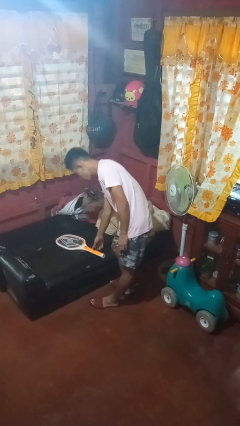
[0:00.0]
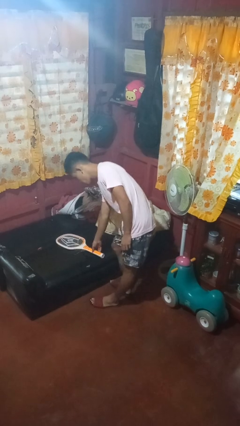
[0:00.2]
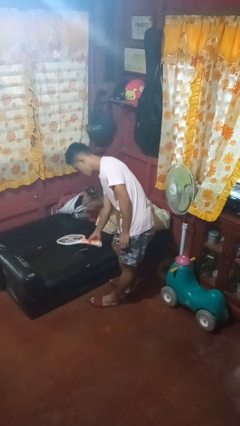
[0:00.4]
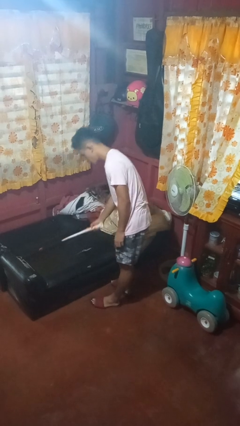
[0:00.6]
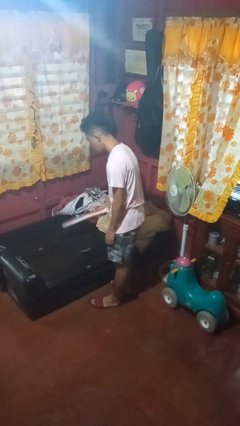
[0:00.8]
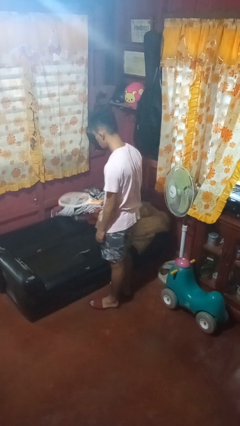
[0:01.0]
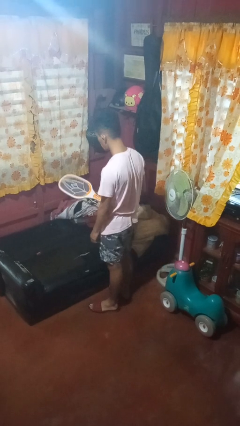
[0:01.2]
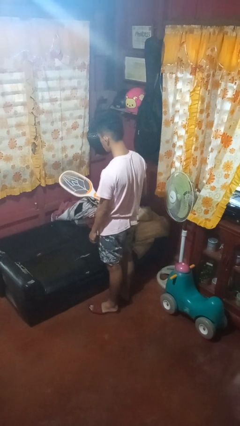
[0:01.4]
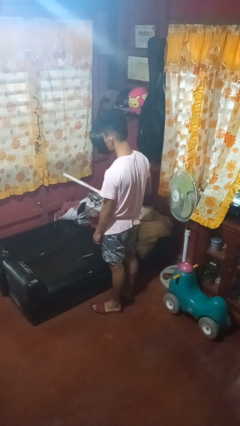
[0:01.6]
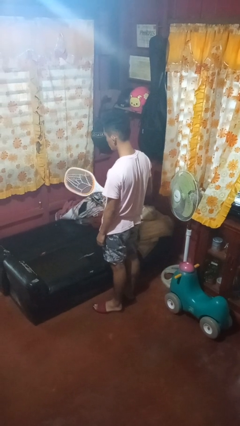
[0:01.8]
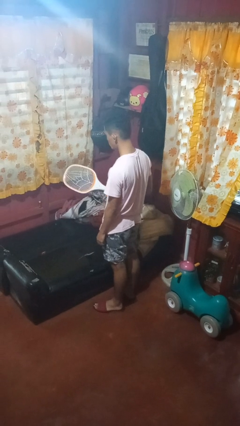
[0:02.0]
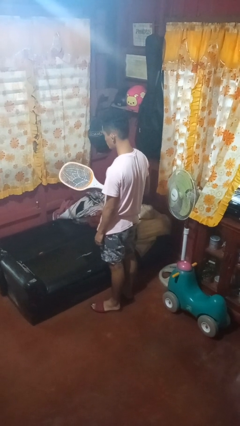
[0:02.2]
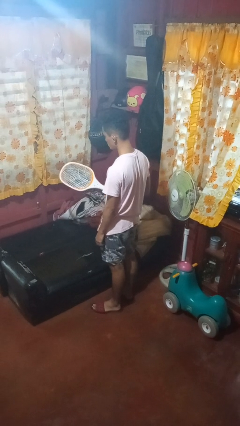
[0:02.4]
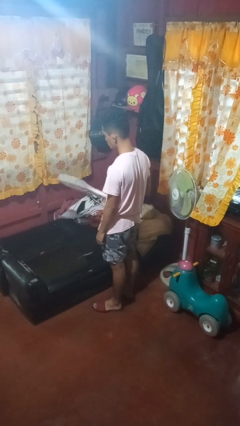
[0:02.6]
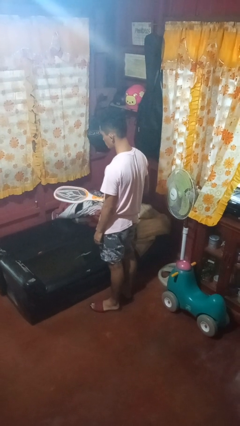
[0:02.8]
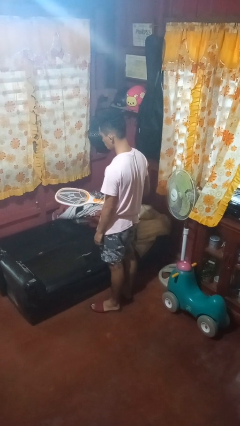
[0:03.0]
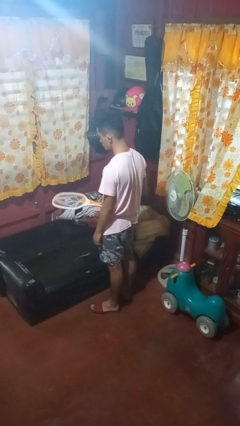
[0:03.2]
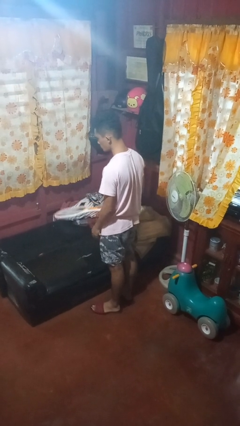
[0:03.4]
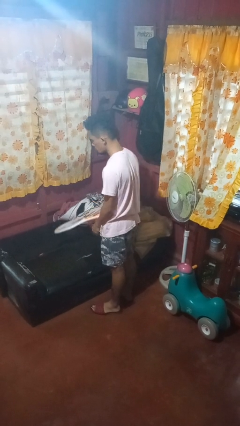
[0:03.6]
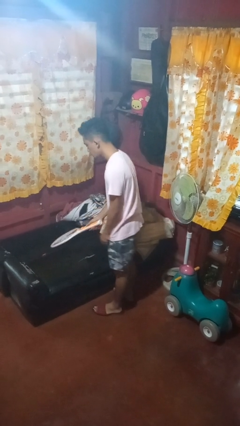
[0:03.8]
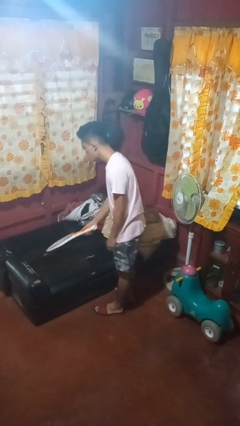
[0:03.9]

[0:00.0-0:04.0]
person picks up object from couch

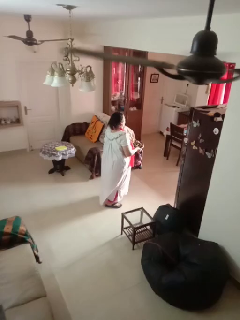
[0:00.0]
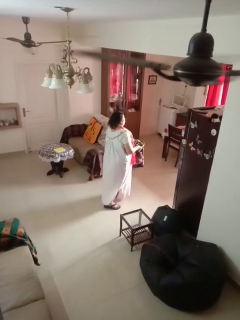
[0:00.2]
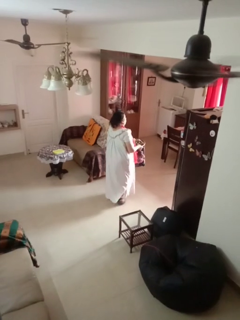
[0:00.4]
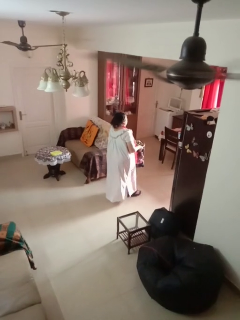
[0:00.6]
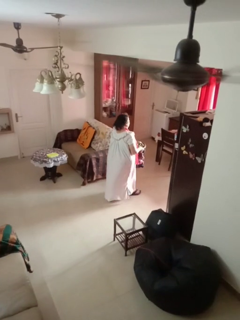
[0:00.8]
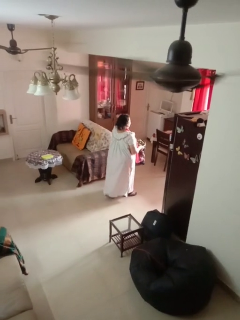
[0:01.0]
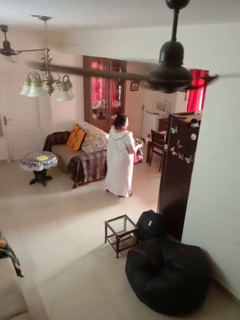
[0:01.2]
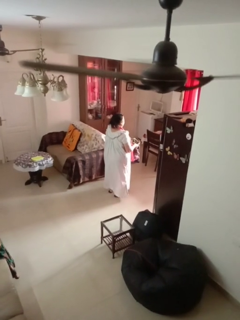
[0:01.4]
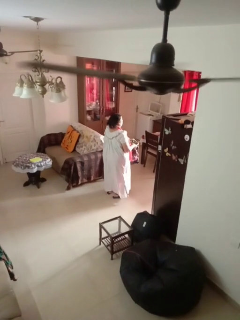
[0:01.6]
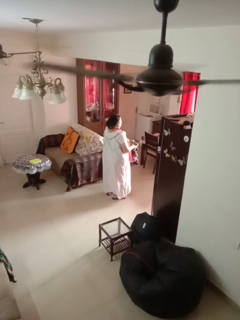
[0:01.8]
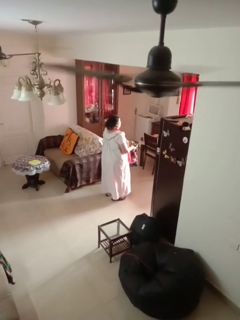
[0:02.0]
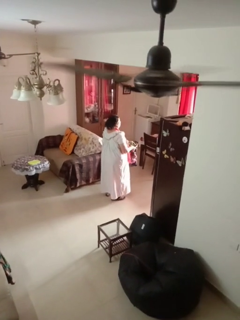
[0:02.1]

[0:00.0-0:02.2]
person carries laundry basket

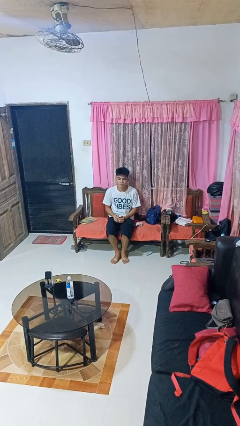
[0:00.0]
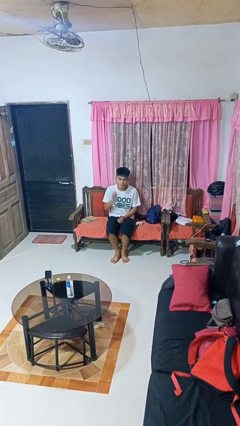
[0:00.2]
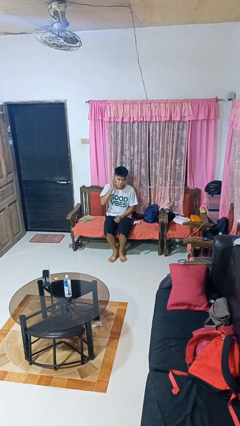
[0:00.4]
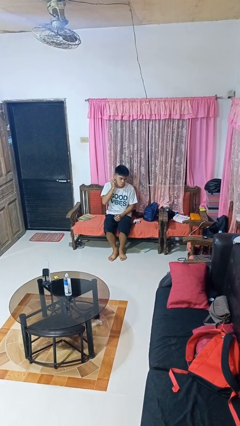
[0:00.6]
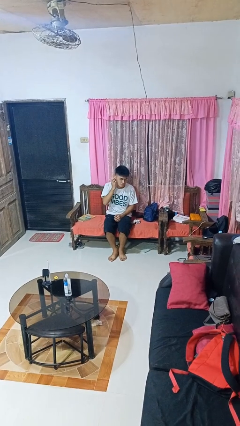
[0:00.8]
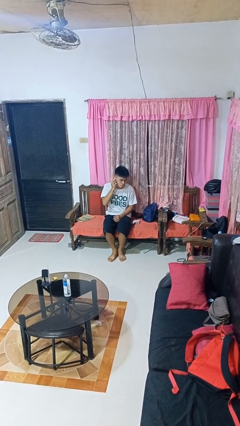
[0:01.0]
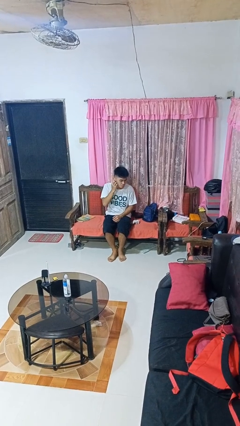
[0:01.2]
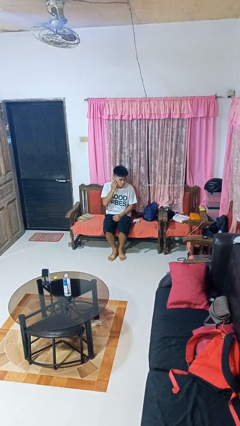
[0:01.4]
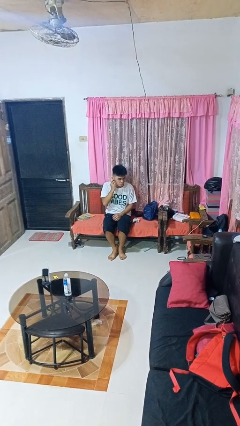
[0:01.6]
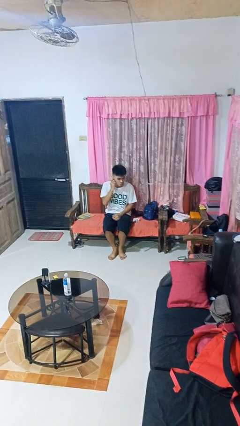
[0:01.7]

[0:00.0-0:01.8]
person touches earlobe

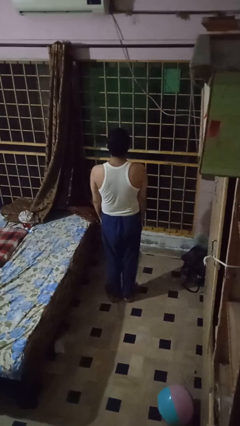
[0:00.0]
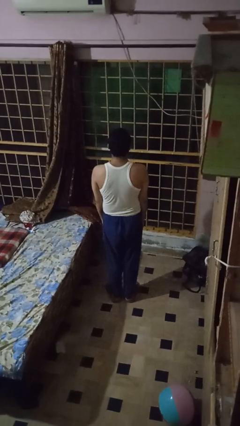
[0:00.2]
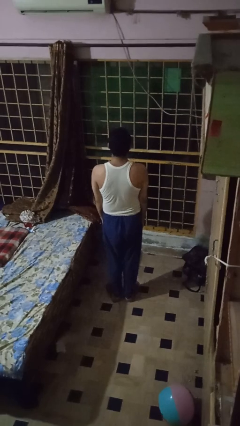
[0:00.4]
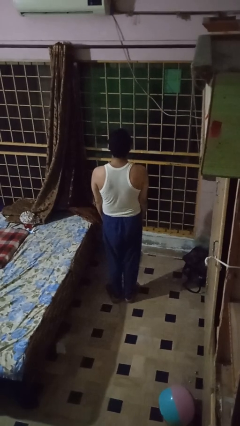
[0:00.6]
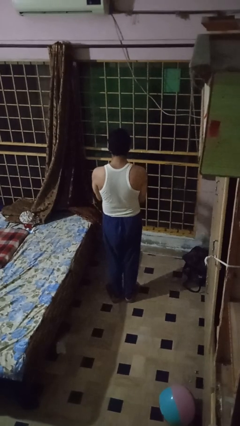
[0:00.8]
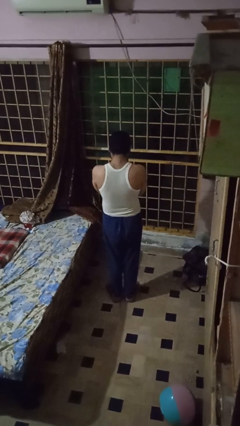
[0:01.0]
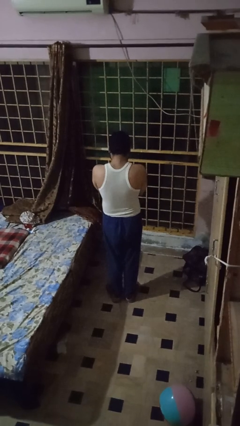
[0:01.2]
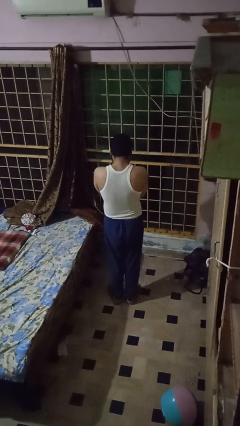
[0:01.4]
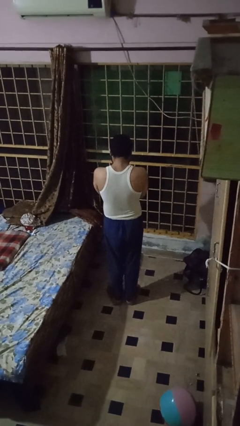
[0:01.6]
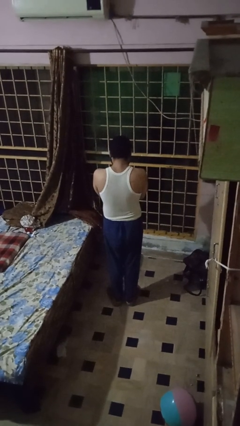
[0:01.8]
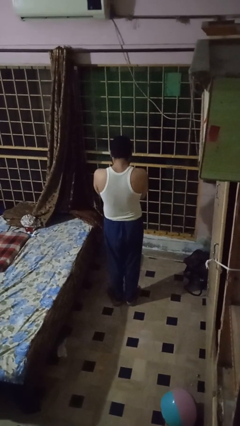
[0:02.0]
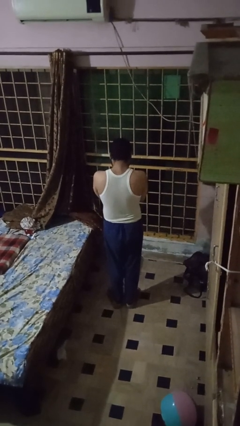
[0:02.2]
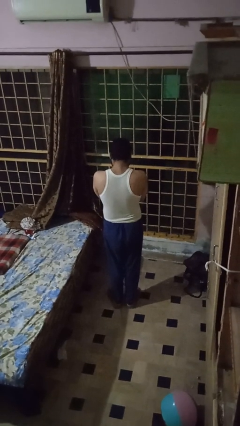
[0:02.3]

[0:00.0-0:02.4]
person covers face with hands

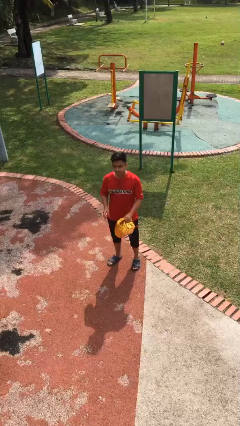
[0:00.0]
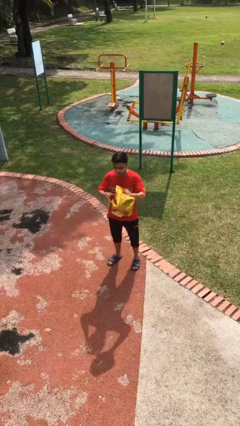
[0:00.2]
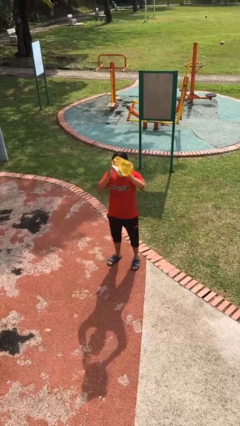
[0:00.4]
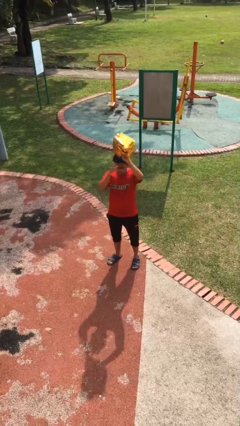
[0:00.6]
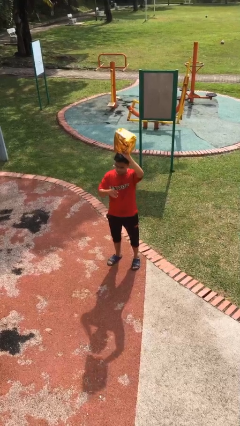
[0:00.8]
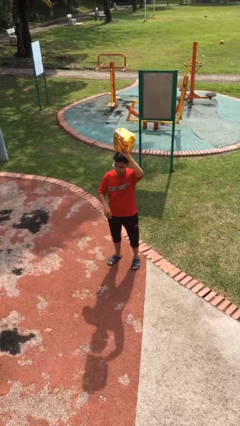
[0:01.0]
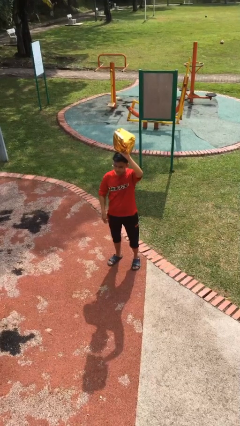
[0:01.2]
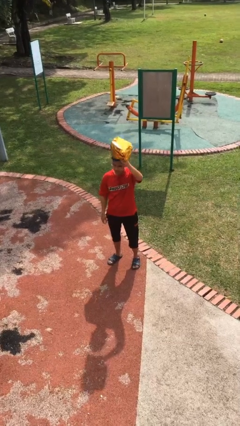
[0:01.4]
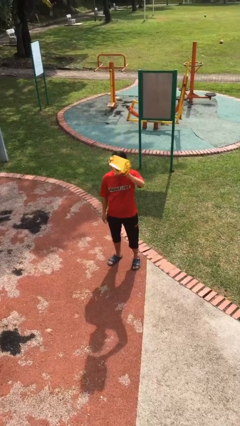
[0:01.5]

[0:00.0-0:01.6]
person holds object above head

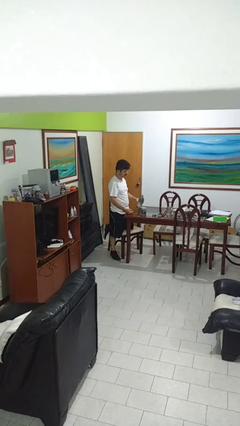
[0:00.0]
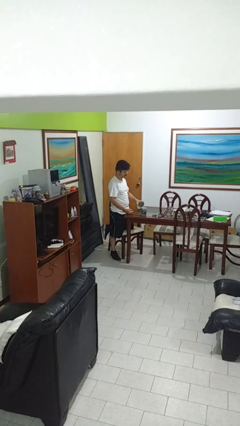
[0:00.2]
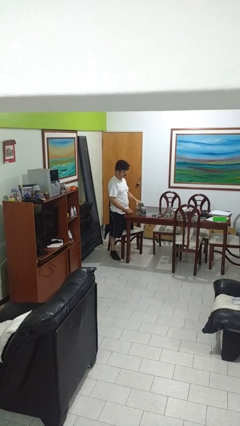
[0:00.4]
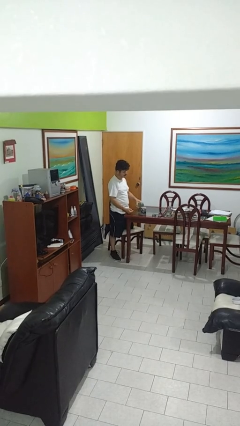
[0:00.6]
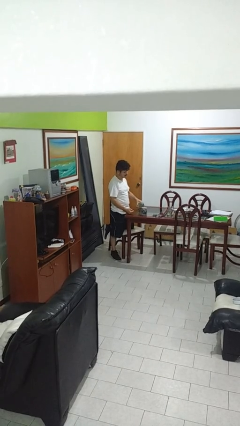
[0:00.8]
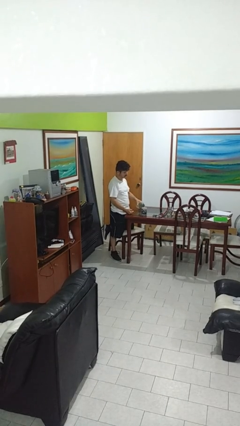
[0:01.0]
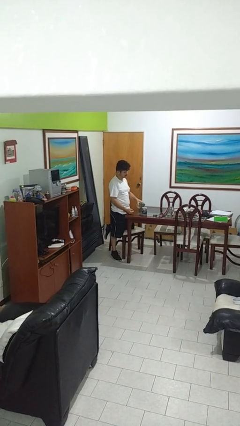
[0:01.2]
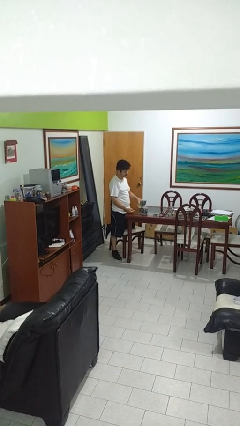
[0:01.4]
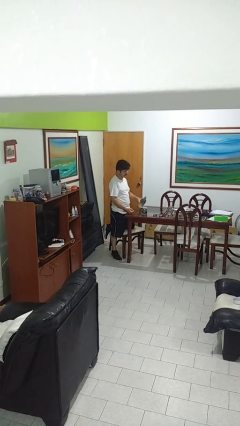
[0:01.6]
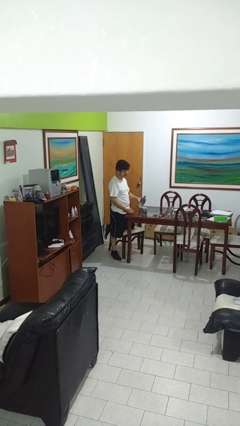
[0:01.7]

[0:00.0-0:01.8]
person pours liquid into cup

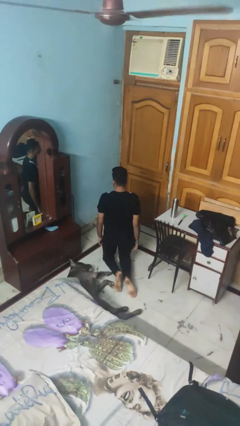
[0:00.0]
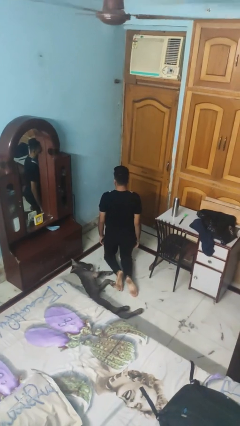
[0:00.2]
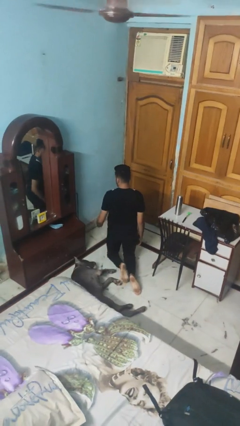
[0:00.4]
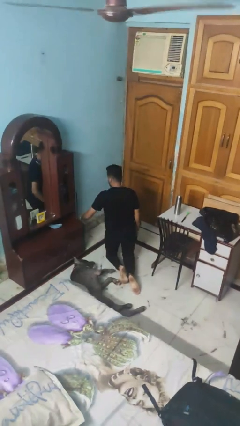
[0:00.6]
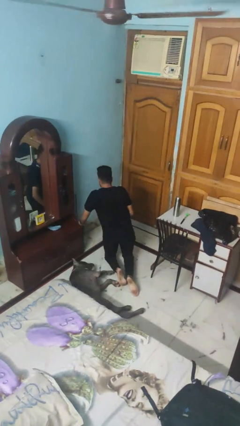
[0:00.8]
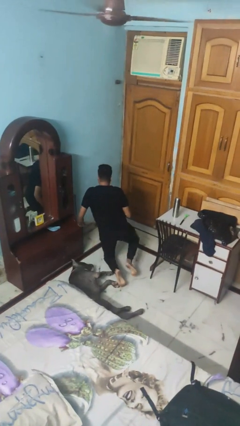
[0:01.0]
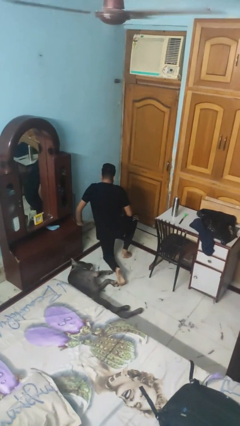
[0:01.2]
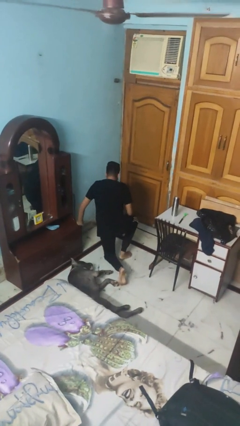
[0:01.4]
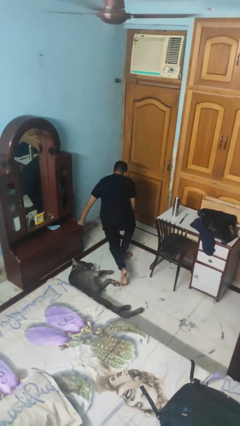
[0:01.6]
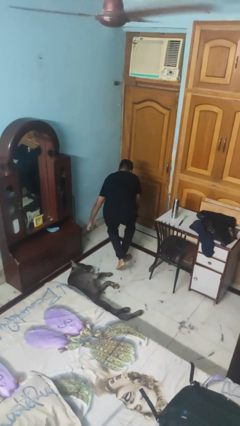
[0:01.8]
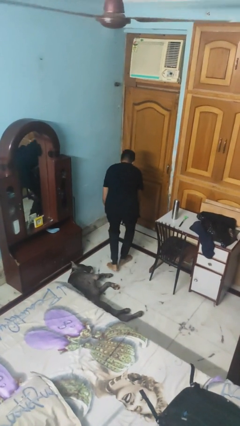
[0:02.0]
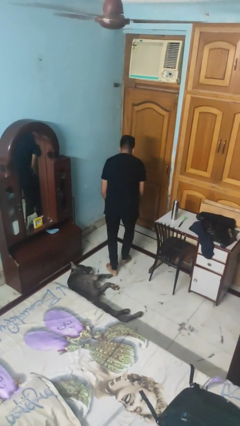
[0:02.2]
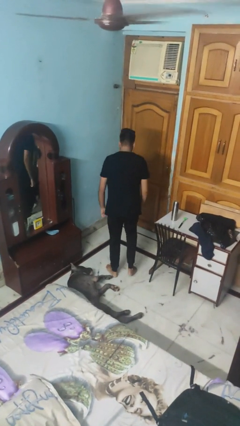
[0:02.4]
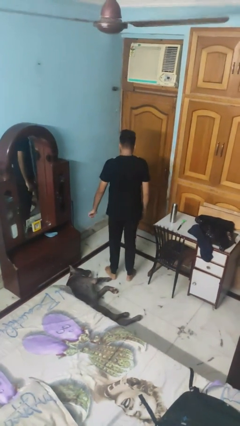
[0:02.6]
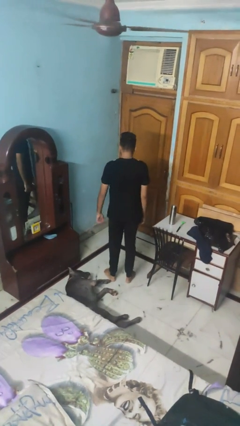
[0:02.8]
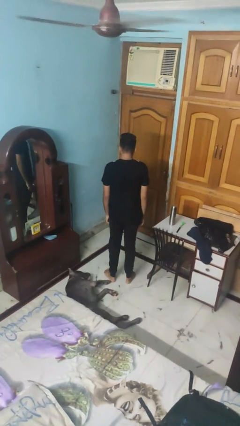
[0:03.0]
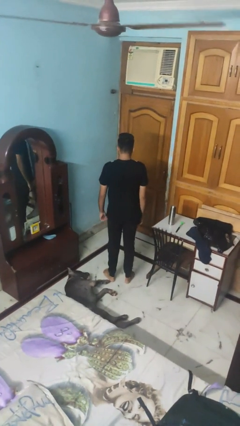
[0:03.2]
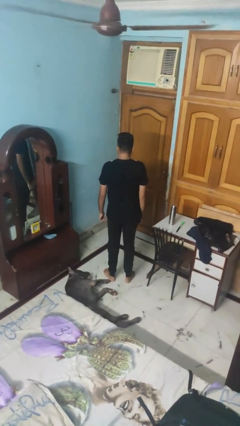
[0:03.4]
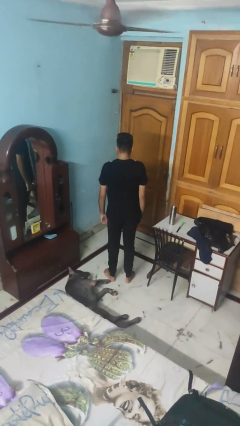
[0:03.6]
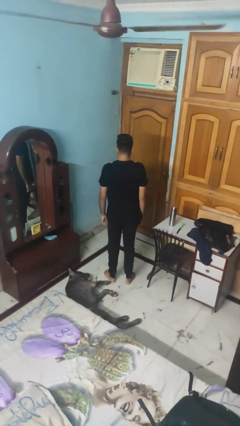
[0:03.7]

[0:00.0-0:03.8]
person stands up from floor
